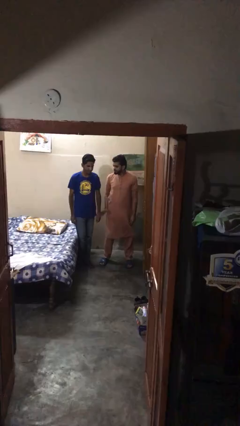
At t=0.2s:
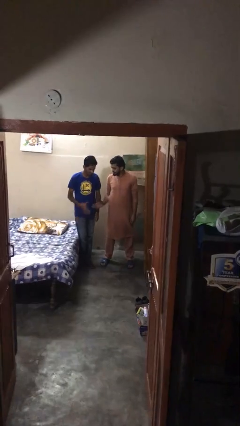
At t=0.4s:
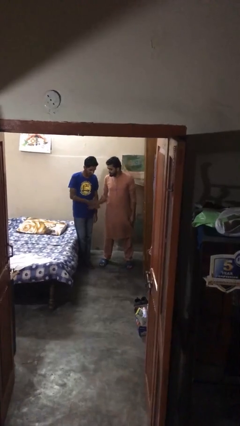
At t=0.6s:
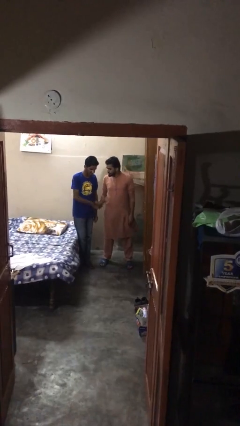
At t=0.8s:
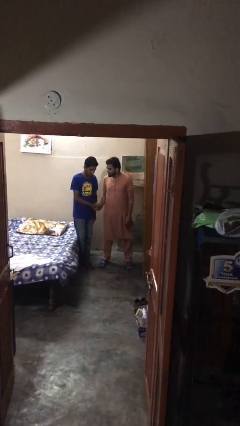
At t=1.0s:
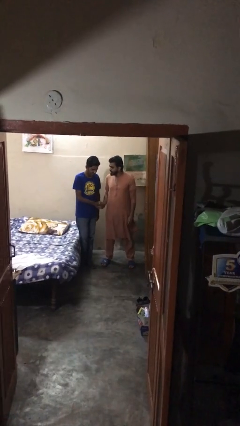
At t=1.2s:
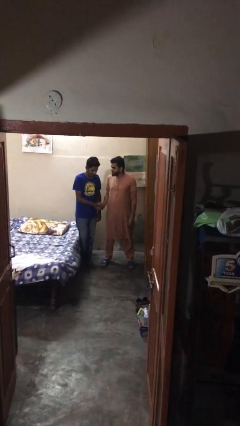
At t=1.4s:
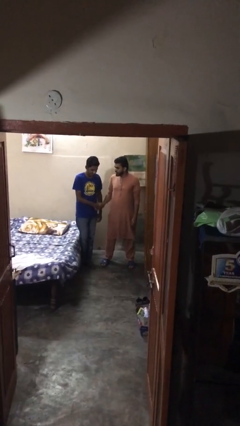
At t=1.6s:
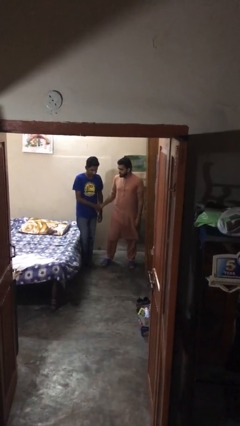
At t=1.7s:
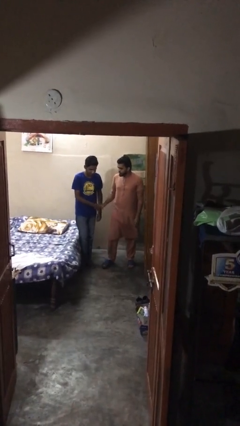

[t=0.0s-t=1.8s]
person shakes hand

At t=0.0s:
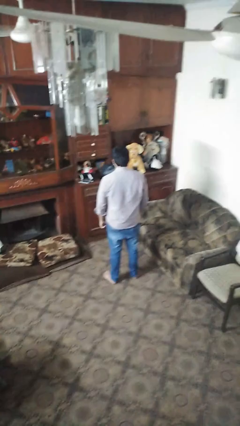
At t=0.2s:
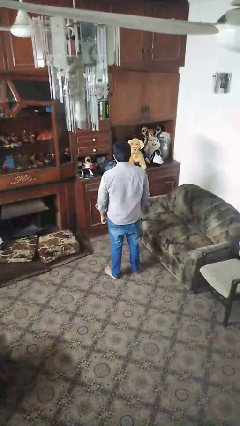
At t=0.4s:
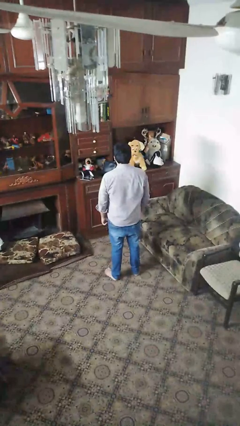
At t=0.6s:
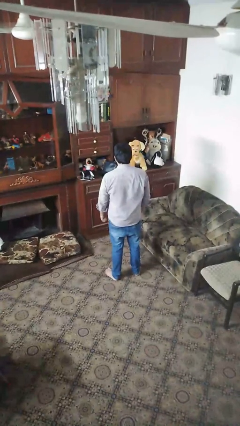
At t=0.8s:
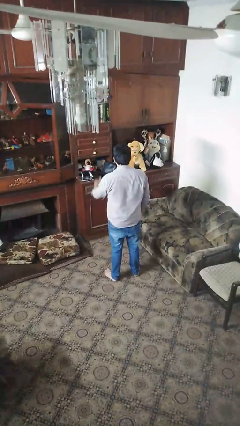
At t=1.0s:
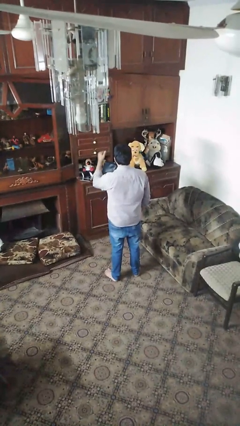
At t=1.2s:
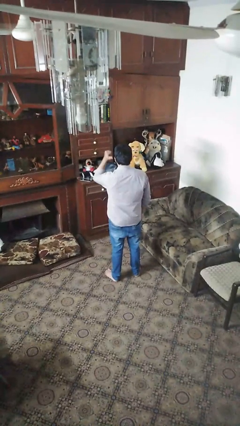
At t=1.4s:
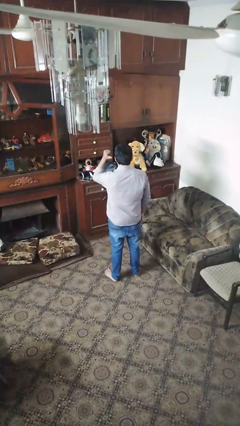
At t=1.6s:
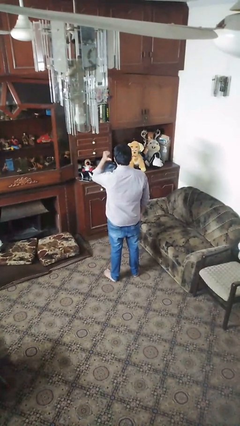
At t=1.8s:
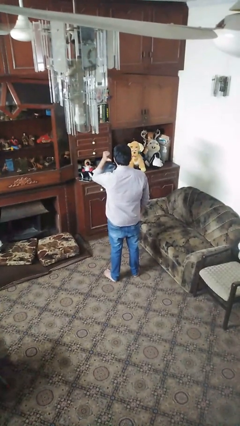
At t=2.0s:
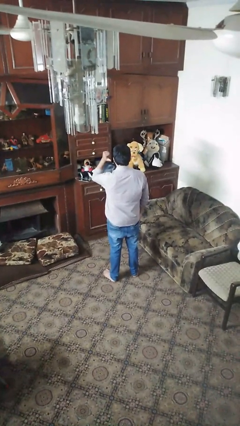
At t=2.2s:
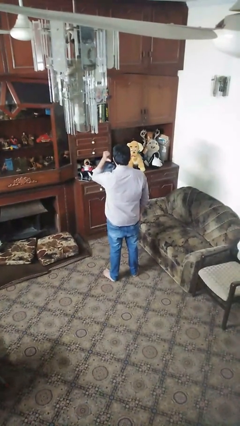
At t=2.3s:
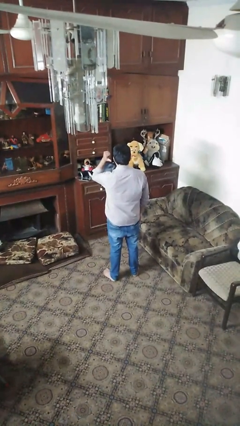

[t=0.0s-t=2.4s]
person gestures behind me

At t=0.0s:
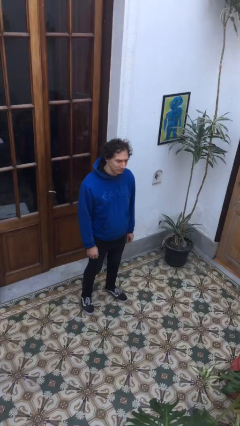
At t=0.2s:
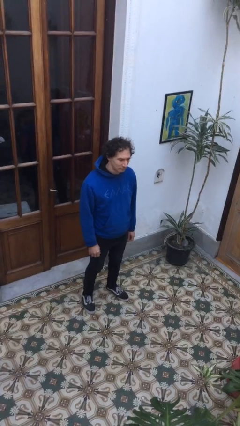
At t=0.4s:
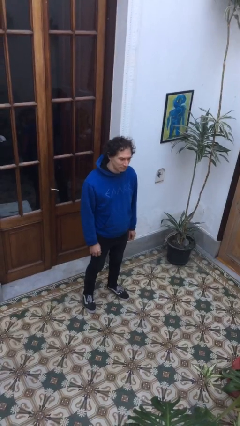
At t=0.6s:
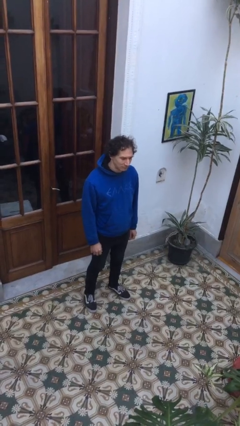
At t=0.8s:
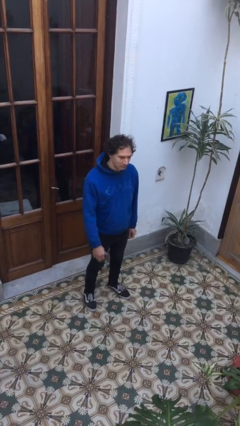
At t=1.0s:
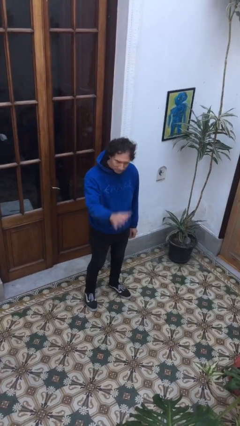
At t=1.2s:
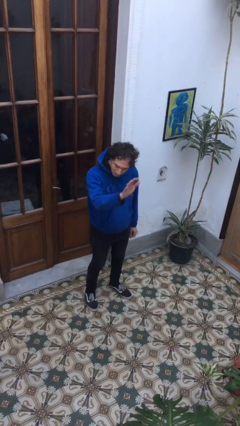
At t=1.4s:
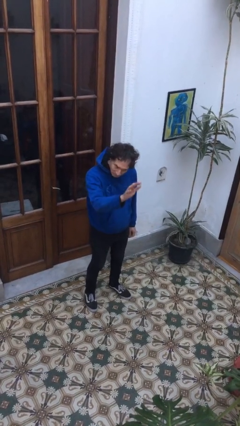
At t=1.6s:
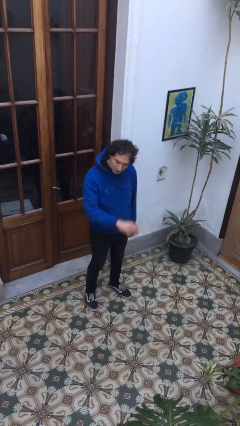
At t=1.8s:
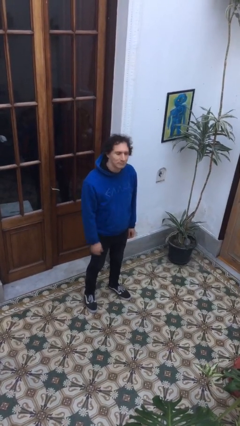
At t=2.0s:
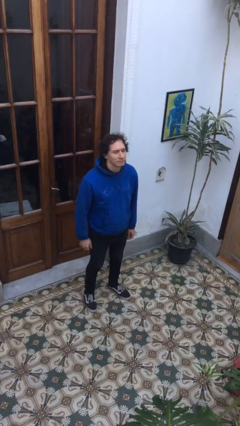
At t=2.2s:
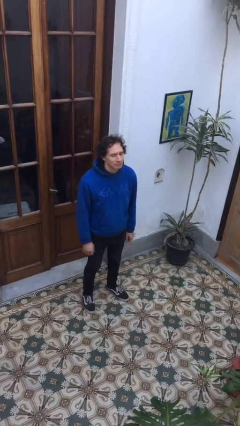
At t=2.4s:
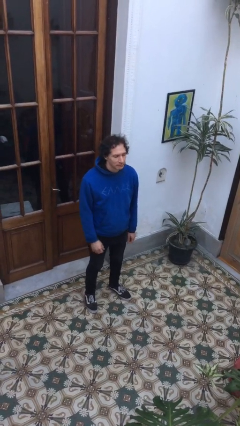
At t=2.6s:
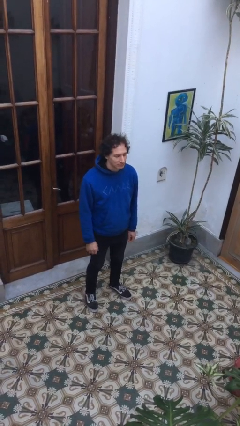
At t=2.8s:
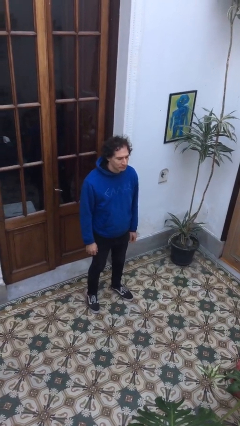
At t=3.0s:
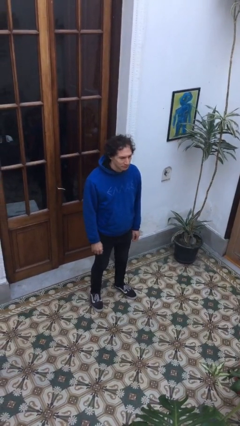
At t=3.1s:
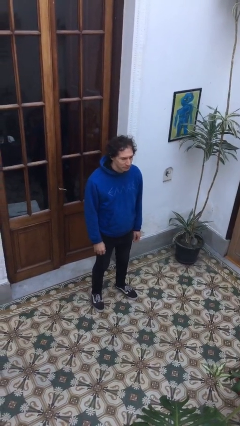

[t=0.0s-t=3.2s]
person waves at person

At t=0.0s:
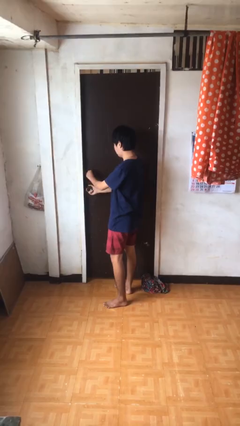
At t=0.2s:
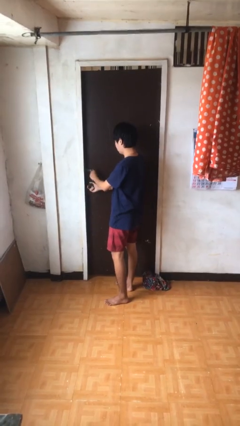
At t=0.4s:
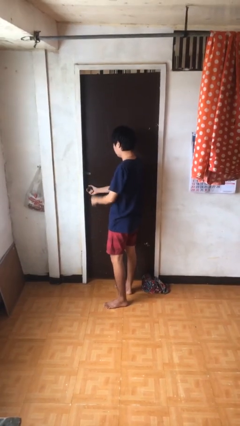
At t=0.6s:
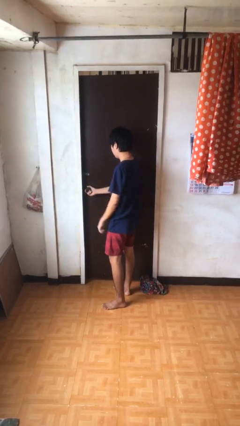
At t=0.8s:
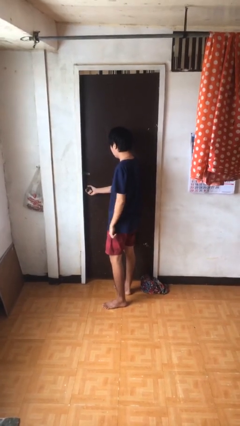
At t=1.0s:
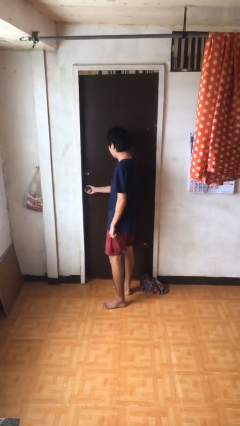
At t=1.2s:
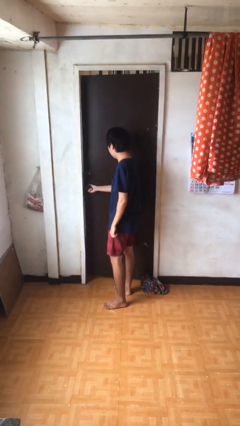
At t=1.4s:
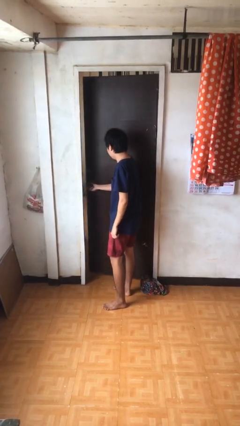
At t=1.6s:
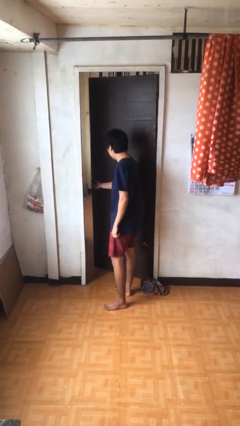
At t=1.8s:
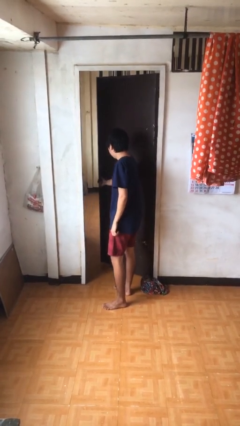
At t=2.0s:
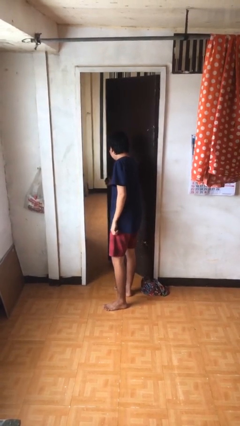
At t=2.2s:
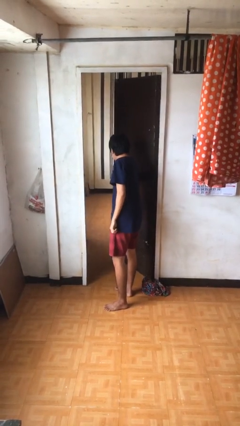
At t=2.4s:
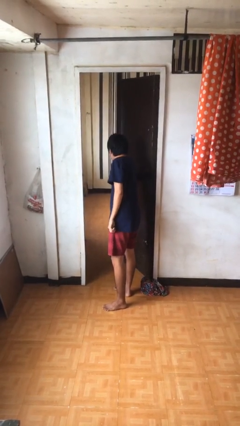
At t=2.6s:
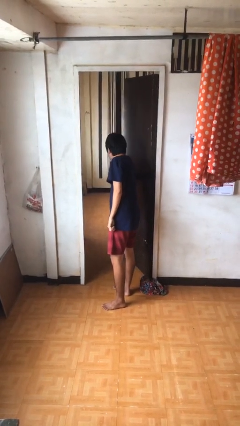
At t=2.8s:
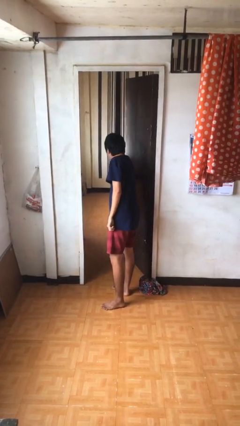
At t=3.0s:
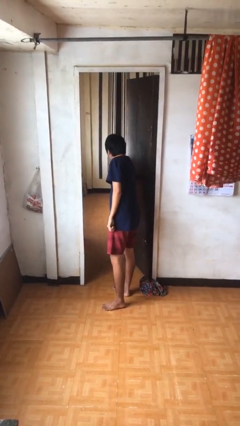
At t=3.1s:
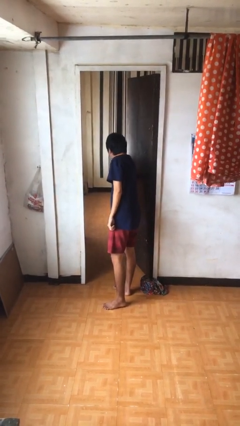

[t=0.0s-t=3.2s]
person opens facility door

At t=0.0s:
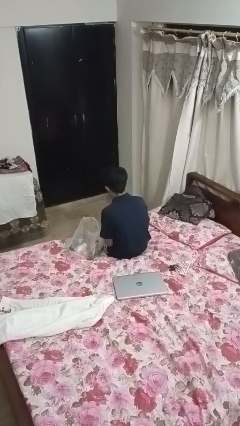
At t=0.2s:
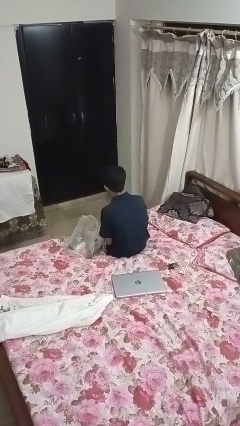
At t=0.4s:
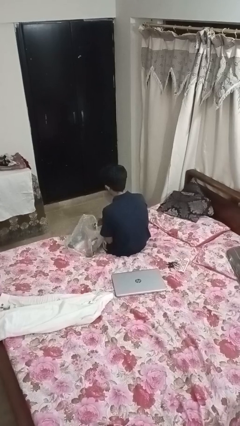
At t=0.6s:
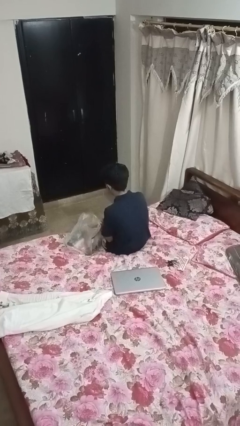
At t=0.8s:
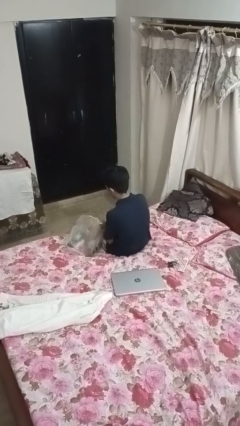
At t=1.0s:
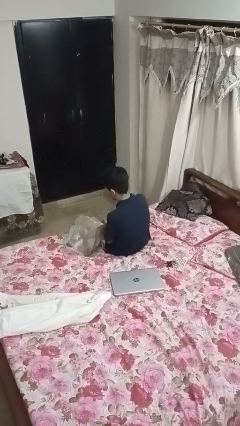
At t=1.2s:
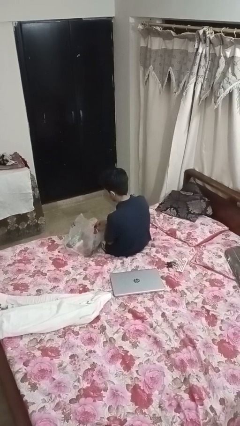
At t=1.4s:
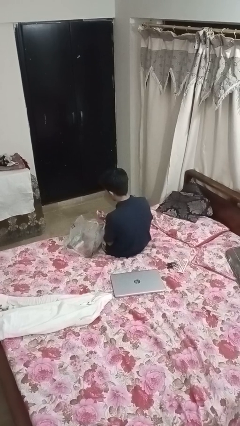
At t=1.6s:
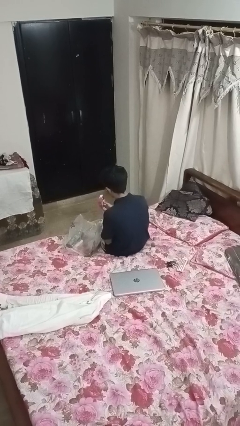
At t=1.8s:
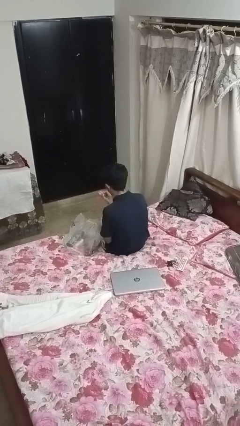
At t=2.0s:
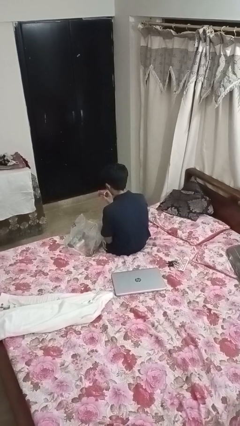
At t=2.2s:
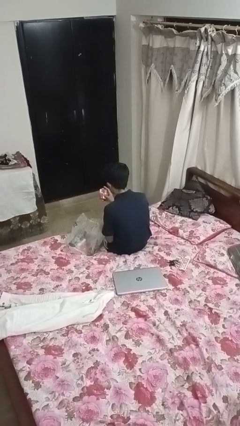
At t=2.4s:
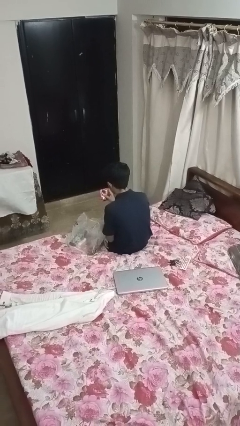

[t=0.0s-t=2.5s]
person takes object from bag

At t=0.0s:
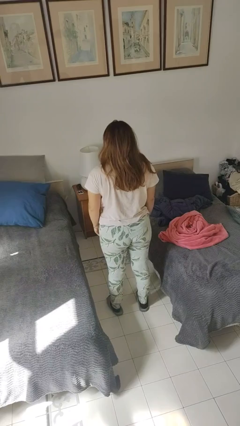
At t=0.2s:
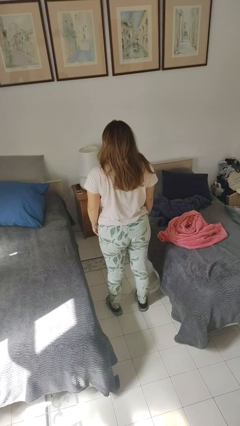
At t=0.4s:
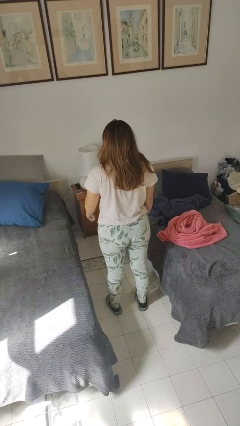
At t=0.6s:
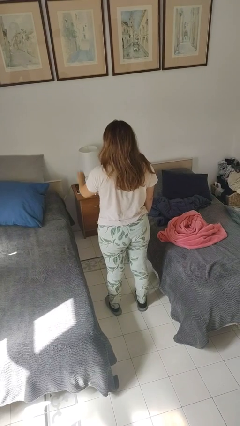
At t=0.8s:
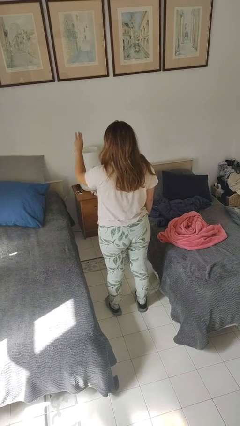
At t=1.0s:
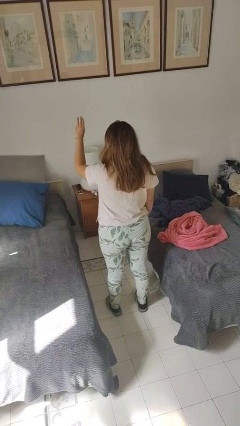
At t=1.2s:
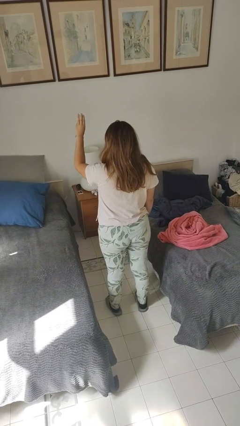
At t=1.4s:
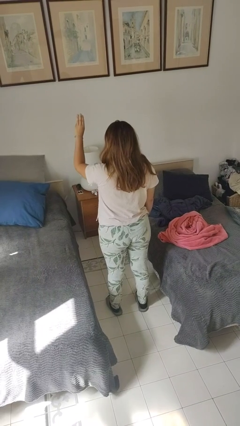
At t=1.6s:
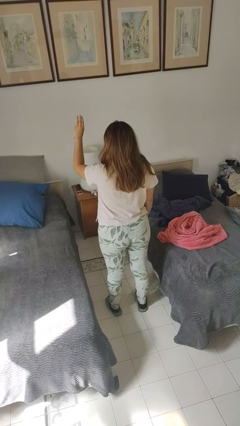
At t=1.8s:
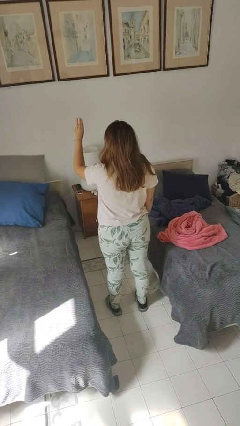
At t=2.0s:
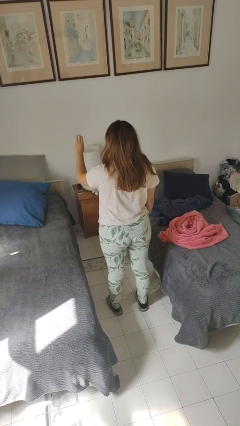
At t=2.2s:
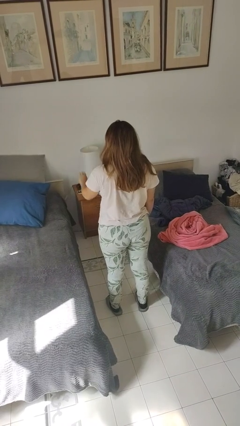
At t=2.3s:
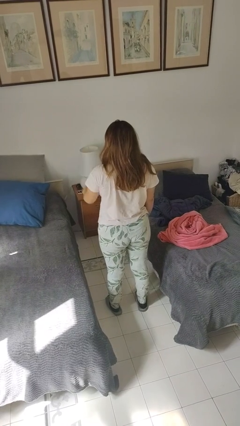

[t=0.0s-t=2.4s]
person gestures number three

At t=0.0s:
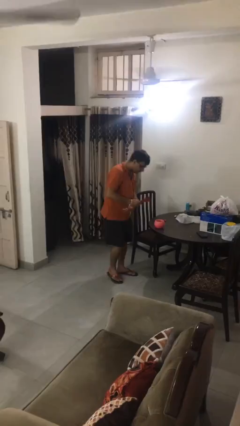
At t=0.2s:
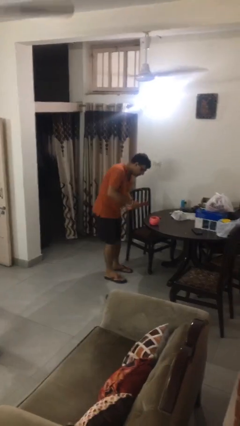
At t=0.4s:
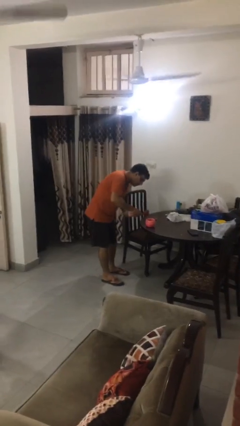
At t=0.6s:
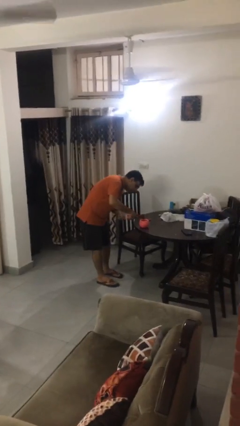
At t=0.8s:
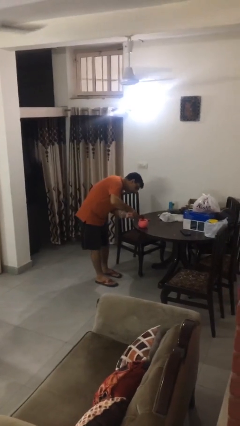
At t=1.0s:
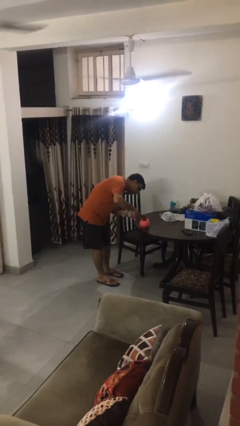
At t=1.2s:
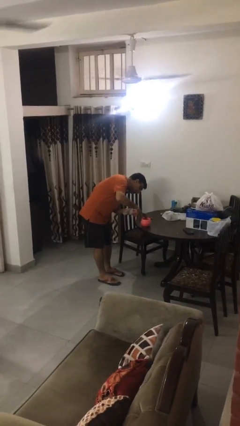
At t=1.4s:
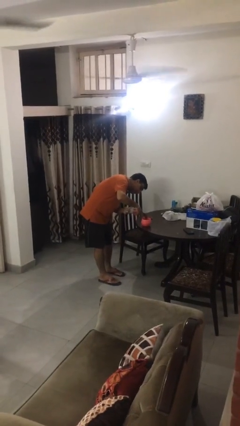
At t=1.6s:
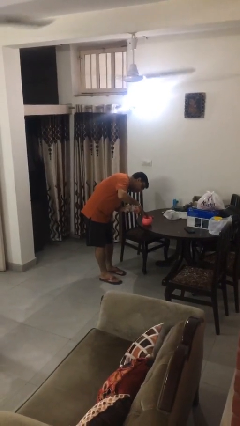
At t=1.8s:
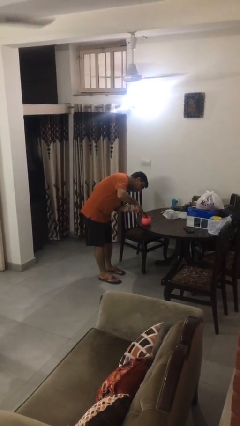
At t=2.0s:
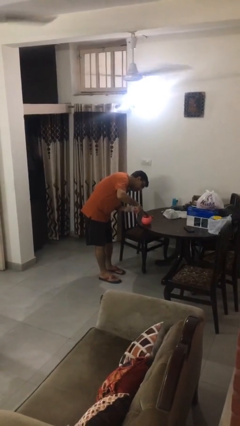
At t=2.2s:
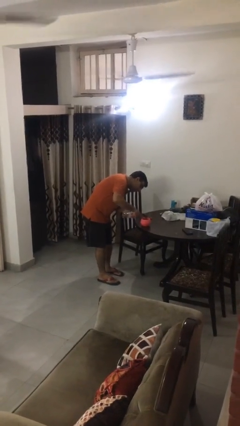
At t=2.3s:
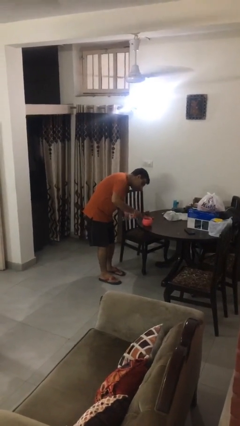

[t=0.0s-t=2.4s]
person waters houseplant
